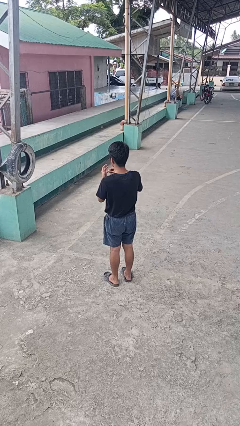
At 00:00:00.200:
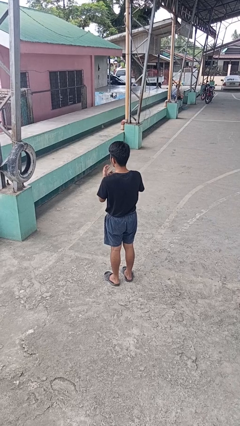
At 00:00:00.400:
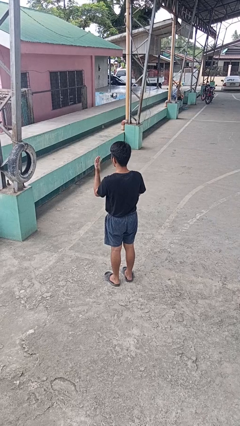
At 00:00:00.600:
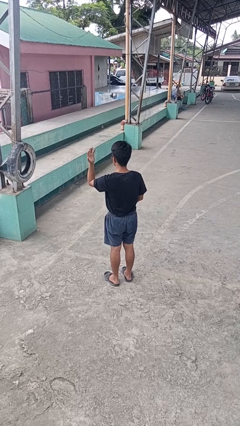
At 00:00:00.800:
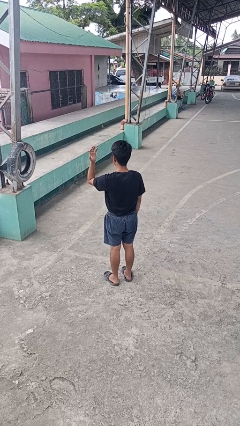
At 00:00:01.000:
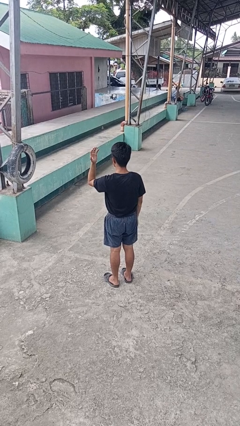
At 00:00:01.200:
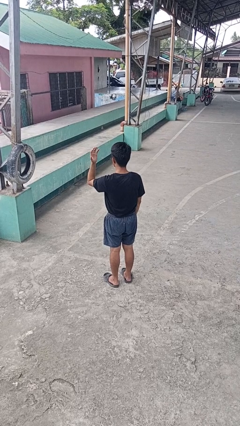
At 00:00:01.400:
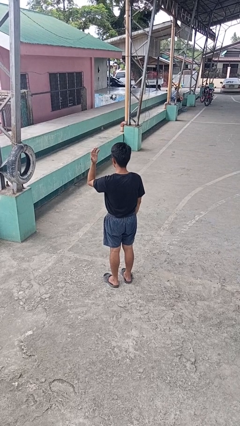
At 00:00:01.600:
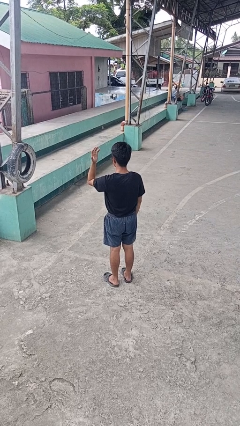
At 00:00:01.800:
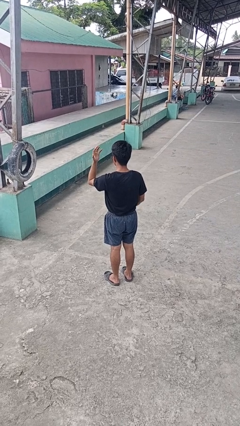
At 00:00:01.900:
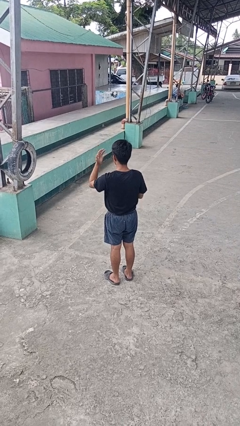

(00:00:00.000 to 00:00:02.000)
person puts on ring

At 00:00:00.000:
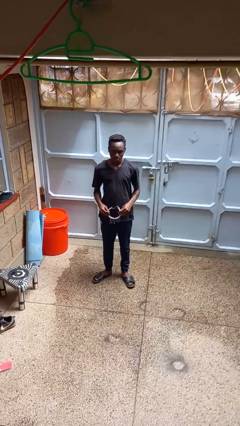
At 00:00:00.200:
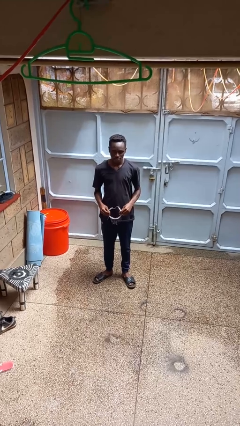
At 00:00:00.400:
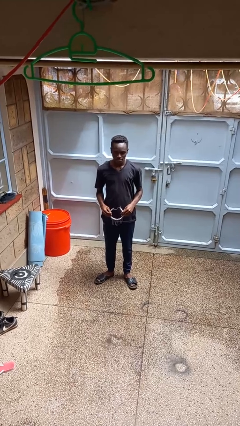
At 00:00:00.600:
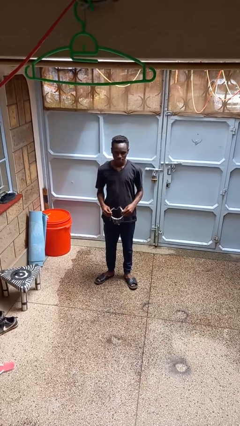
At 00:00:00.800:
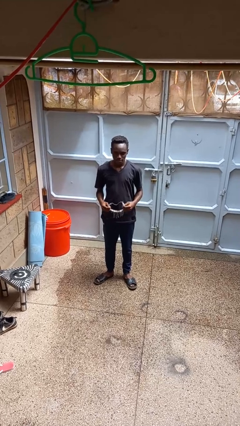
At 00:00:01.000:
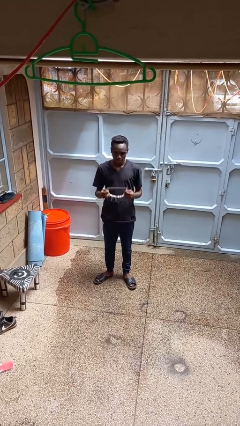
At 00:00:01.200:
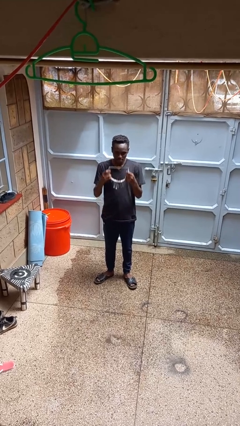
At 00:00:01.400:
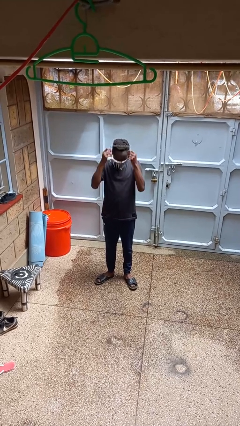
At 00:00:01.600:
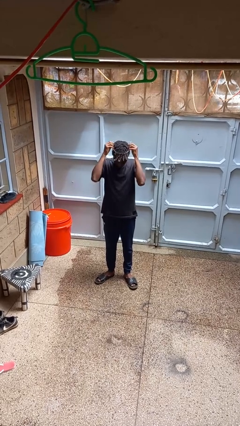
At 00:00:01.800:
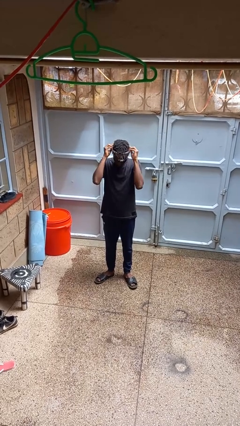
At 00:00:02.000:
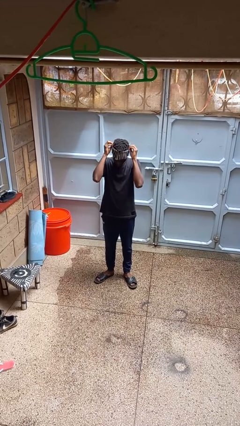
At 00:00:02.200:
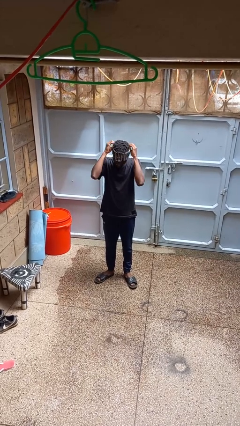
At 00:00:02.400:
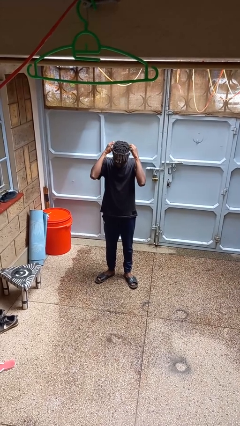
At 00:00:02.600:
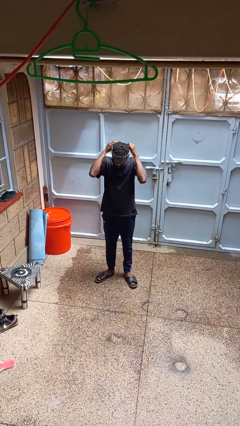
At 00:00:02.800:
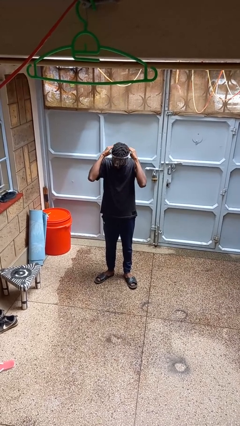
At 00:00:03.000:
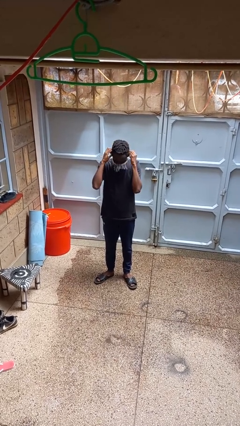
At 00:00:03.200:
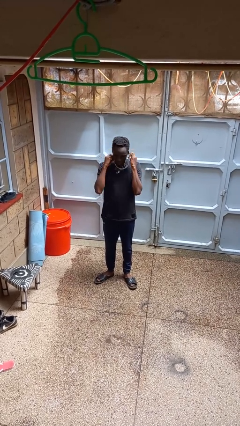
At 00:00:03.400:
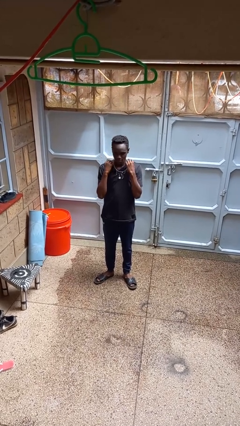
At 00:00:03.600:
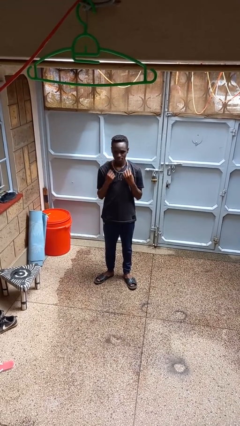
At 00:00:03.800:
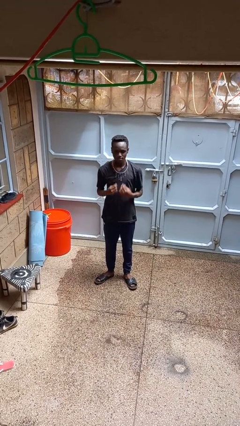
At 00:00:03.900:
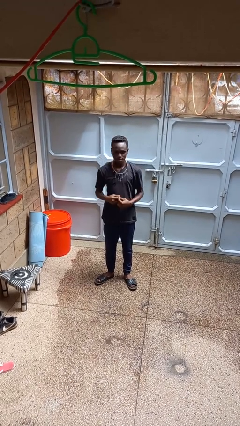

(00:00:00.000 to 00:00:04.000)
person puts on necklace

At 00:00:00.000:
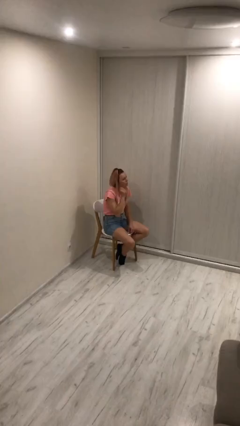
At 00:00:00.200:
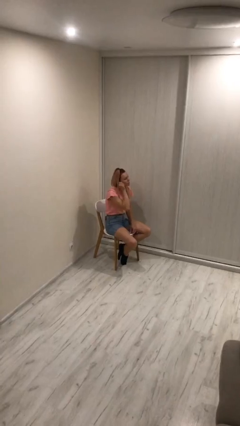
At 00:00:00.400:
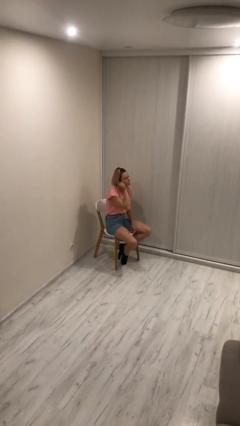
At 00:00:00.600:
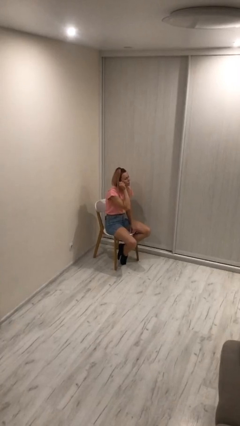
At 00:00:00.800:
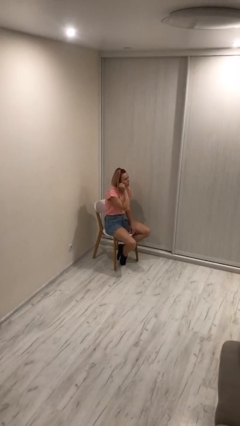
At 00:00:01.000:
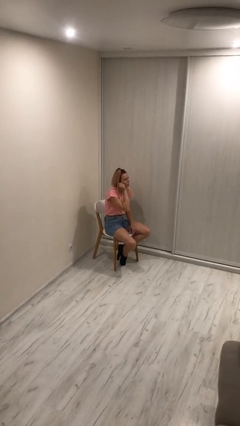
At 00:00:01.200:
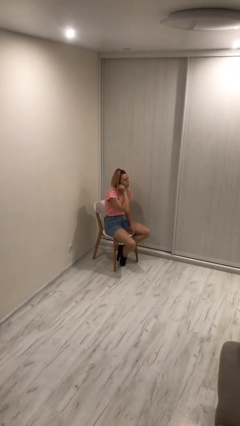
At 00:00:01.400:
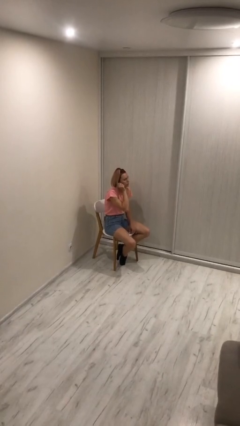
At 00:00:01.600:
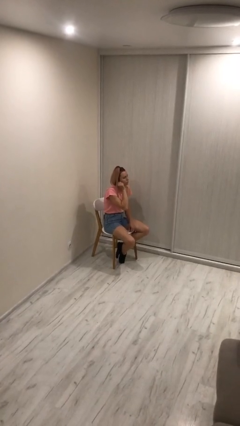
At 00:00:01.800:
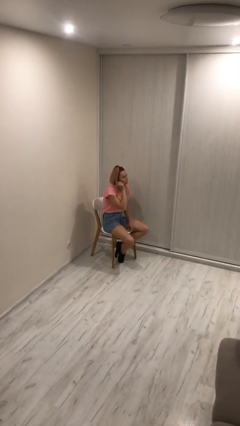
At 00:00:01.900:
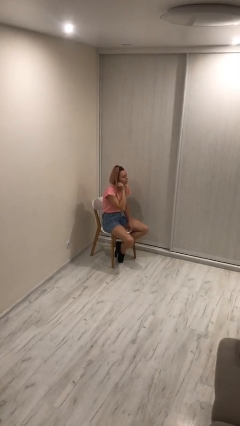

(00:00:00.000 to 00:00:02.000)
person touches earlobe

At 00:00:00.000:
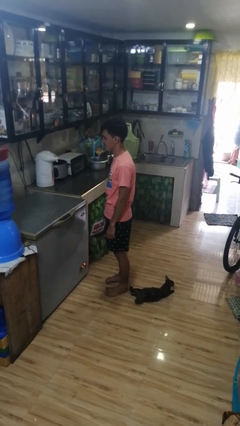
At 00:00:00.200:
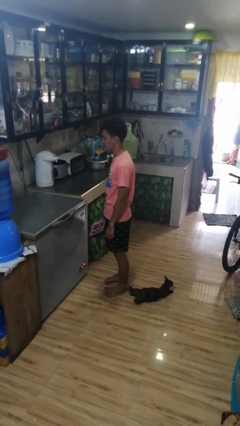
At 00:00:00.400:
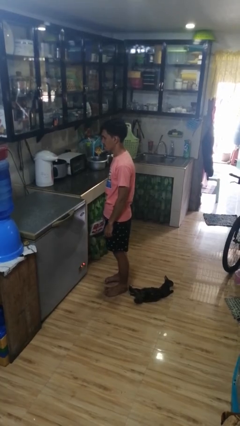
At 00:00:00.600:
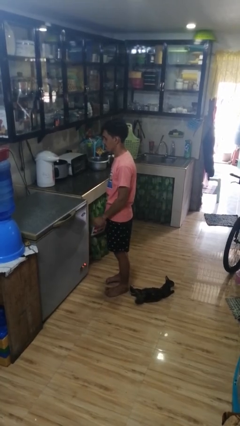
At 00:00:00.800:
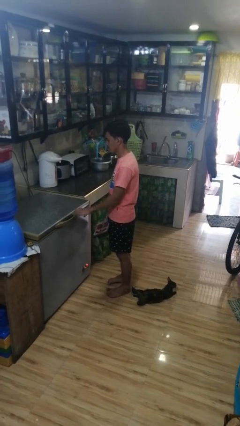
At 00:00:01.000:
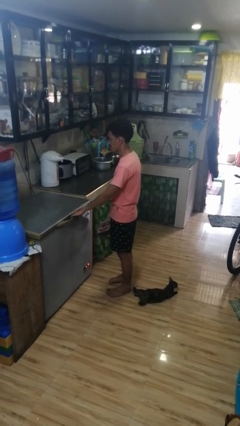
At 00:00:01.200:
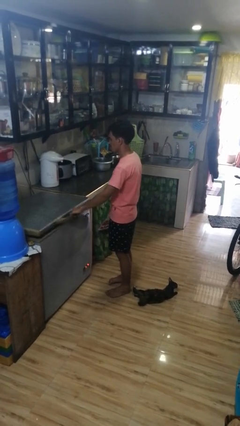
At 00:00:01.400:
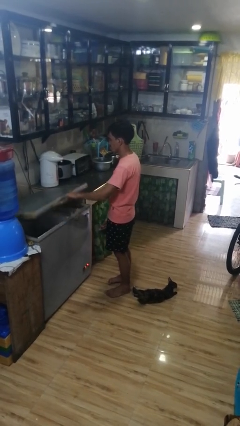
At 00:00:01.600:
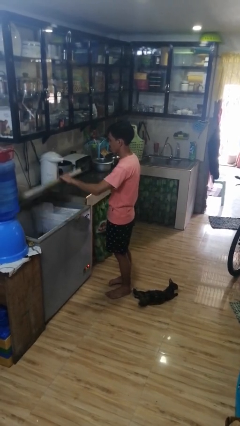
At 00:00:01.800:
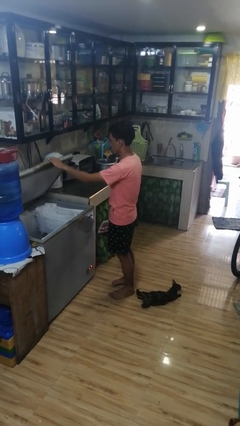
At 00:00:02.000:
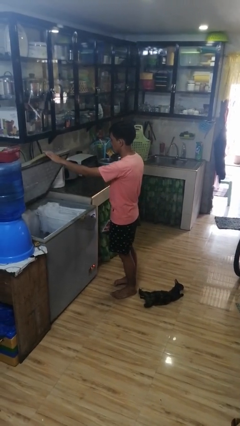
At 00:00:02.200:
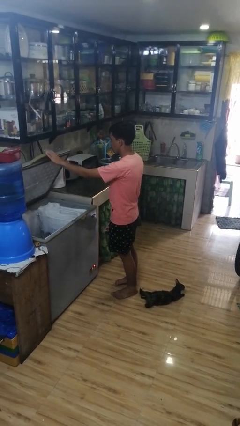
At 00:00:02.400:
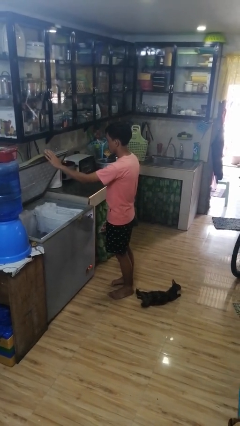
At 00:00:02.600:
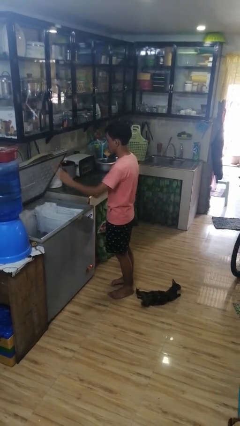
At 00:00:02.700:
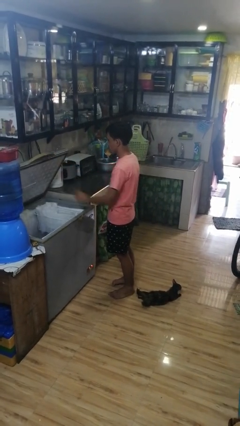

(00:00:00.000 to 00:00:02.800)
person opens refrigerator

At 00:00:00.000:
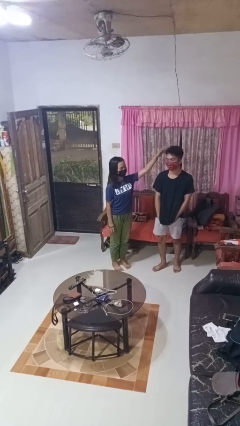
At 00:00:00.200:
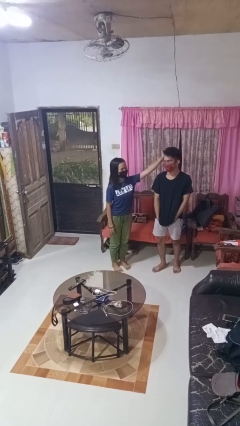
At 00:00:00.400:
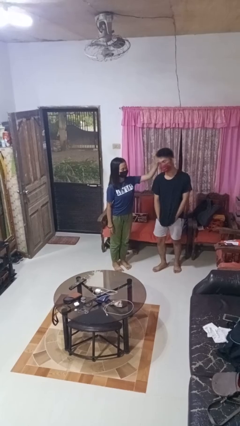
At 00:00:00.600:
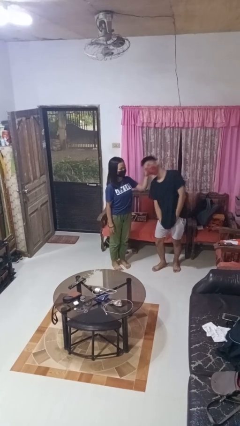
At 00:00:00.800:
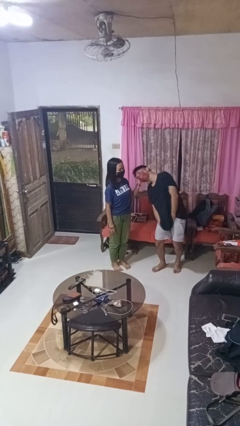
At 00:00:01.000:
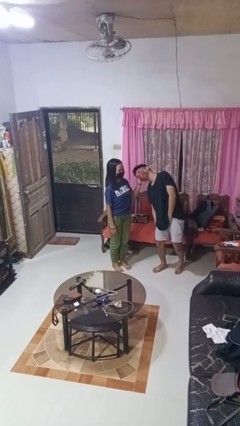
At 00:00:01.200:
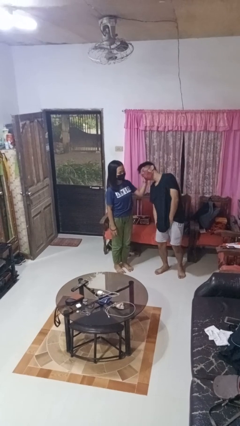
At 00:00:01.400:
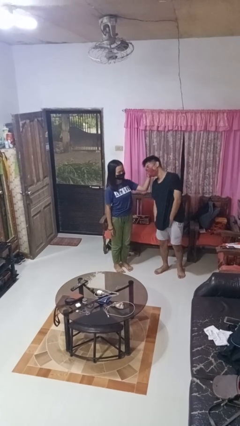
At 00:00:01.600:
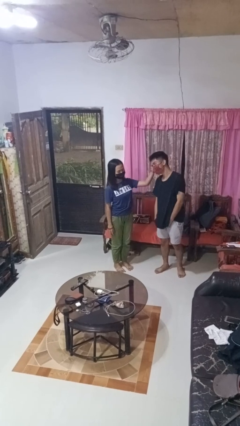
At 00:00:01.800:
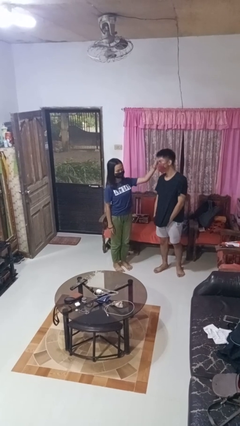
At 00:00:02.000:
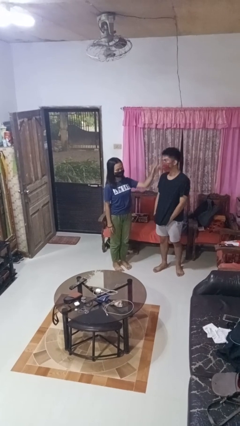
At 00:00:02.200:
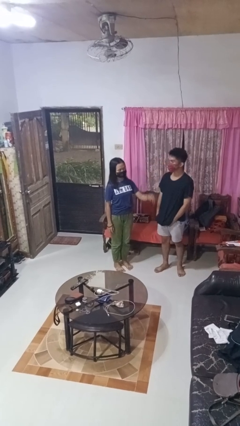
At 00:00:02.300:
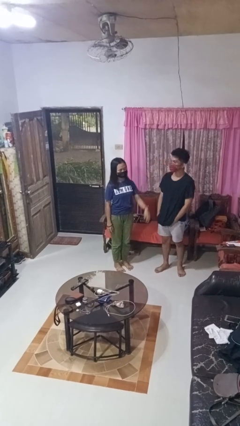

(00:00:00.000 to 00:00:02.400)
person grabs person by hair

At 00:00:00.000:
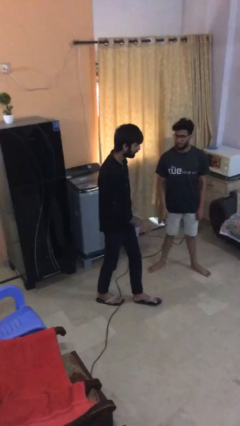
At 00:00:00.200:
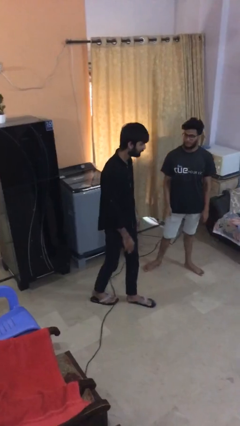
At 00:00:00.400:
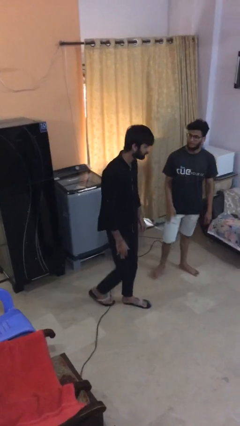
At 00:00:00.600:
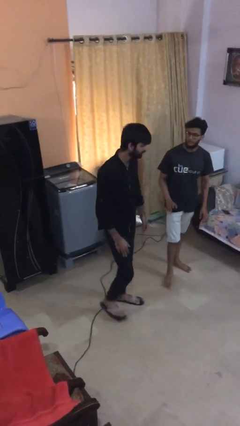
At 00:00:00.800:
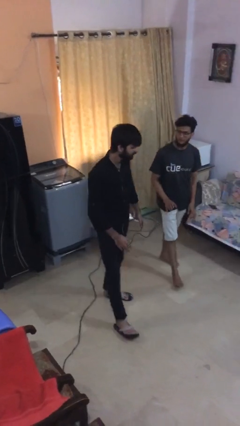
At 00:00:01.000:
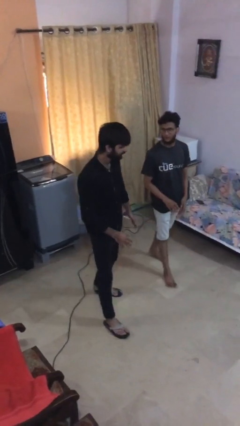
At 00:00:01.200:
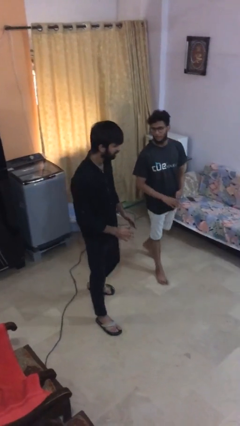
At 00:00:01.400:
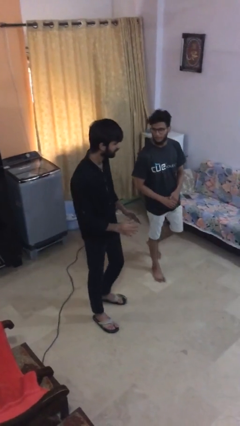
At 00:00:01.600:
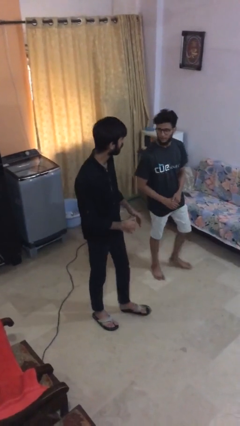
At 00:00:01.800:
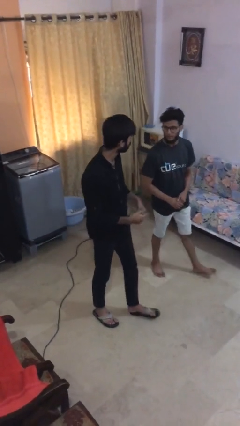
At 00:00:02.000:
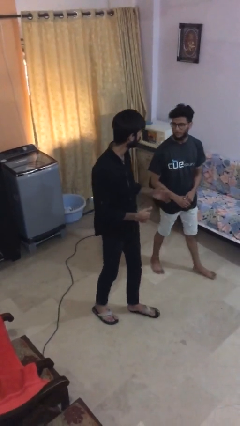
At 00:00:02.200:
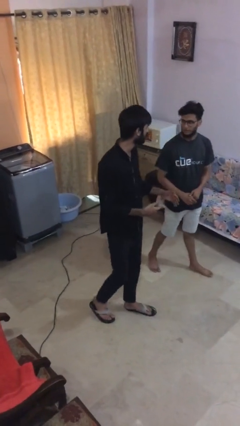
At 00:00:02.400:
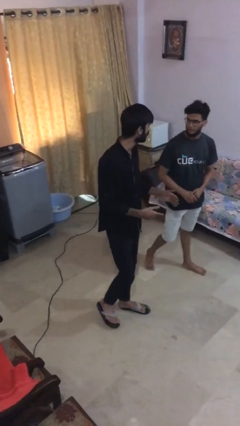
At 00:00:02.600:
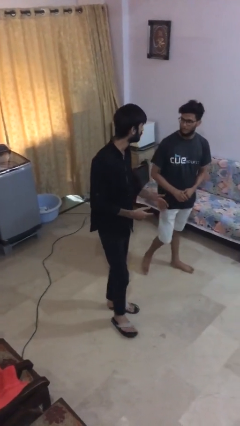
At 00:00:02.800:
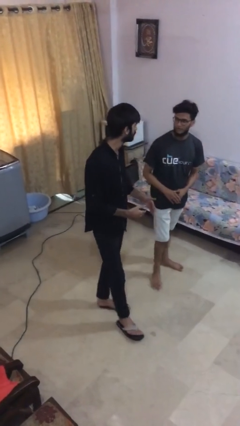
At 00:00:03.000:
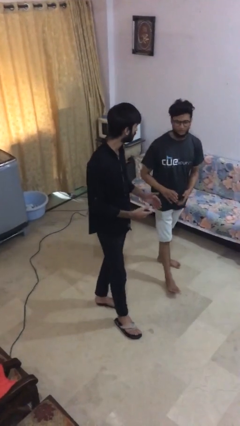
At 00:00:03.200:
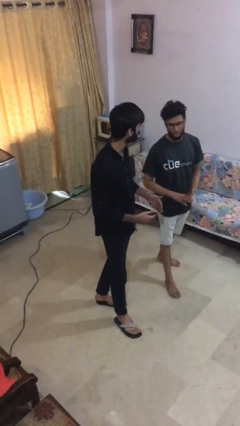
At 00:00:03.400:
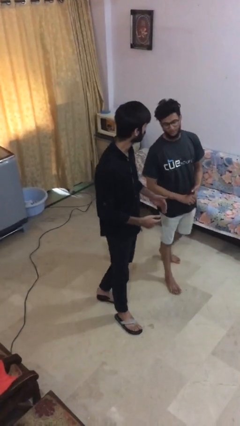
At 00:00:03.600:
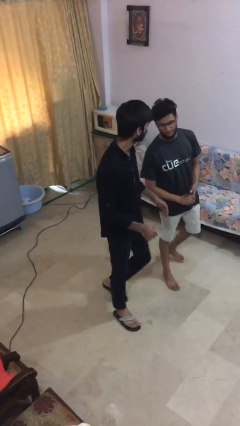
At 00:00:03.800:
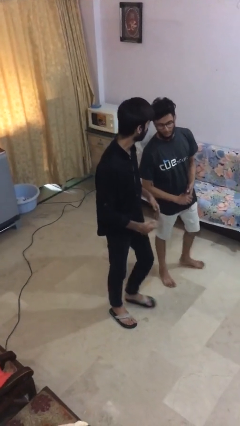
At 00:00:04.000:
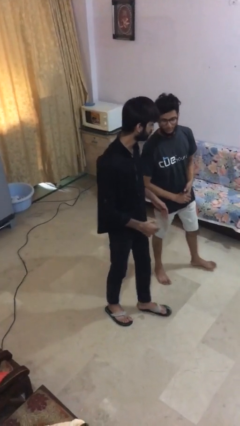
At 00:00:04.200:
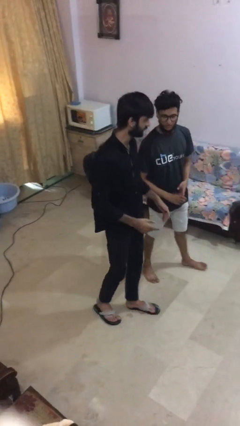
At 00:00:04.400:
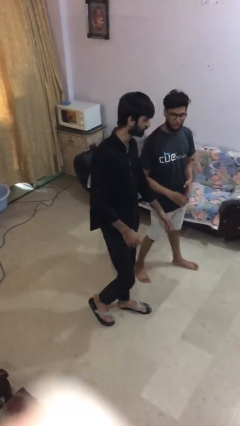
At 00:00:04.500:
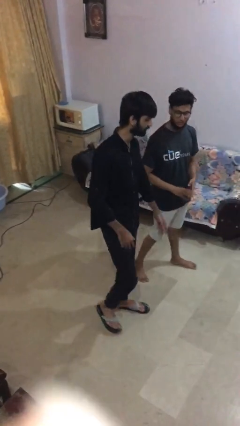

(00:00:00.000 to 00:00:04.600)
person talks to person
